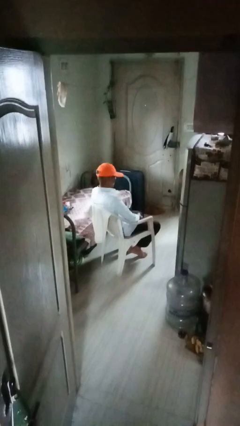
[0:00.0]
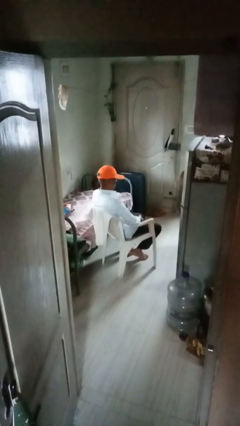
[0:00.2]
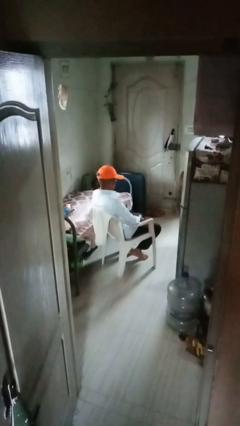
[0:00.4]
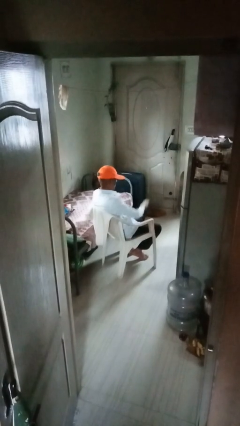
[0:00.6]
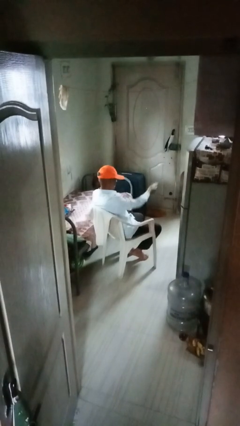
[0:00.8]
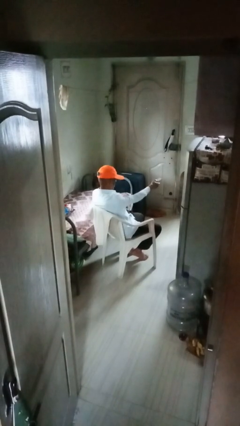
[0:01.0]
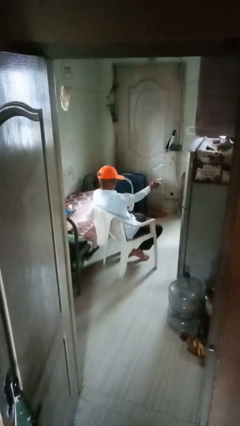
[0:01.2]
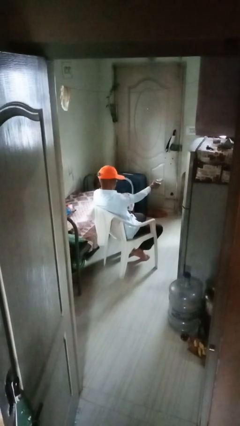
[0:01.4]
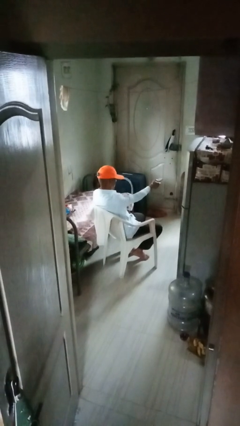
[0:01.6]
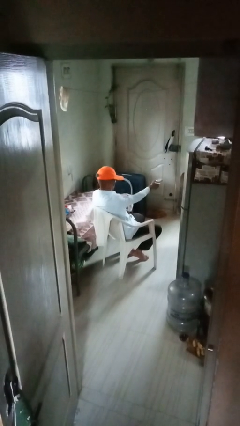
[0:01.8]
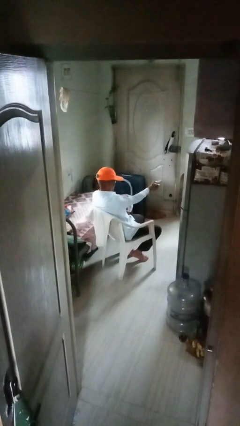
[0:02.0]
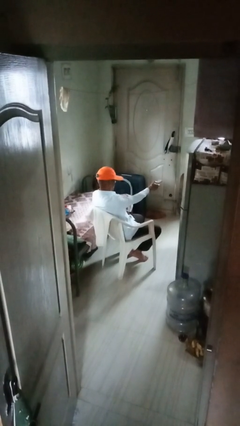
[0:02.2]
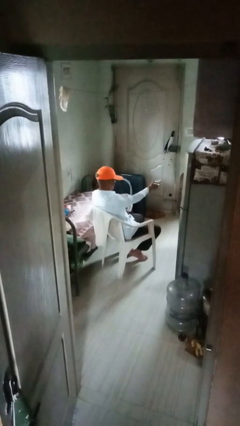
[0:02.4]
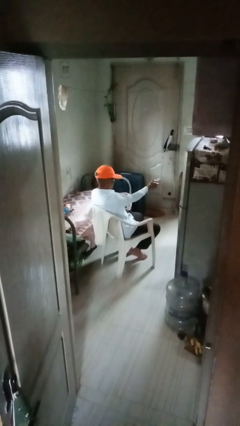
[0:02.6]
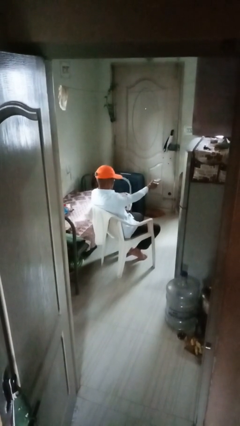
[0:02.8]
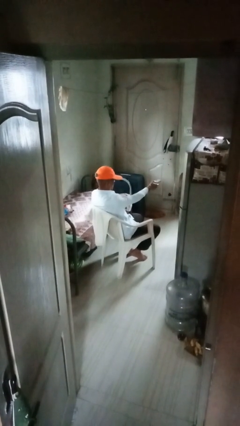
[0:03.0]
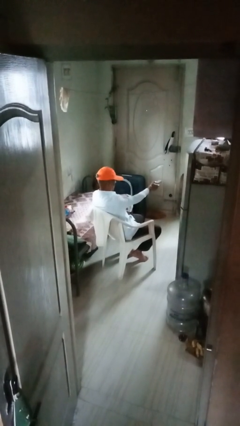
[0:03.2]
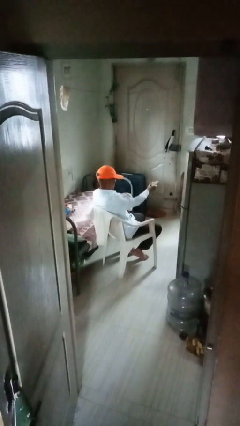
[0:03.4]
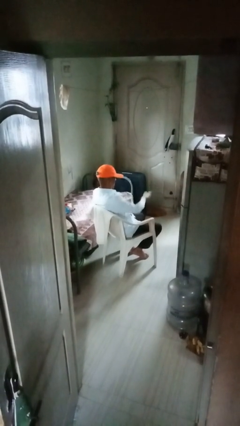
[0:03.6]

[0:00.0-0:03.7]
person uses television remote

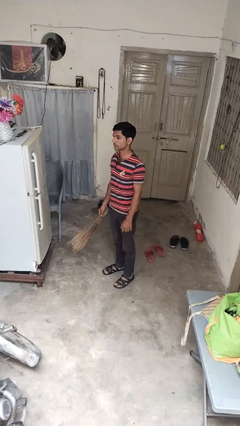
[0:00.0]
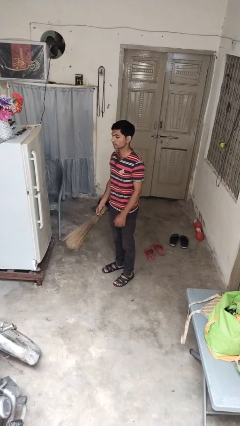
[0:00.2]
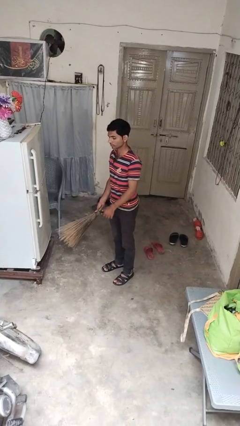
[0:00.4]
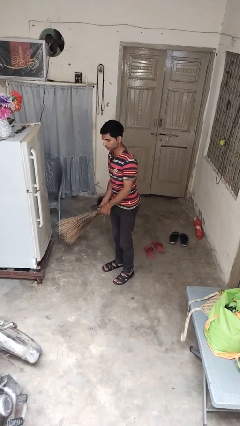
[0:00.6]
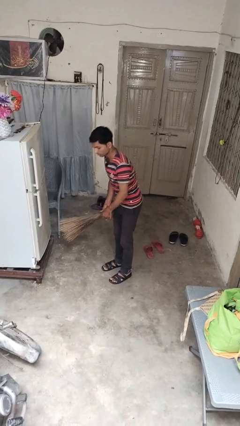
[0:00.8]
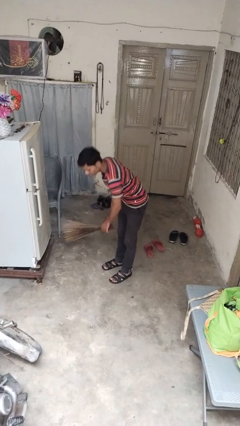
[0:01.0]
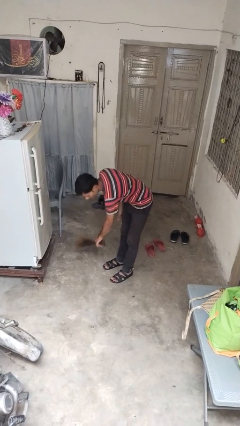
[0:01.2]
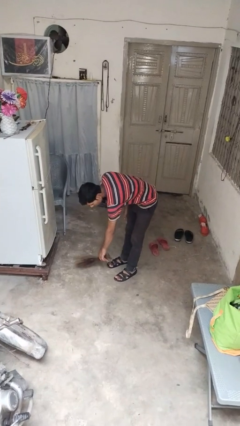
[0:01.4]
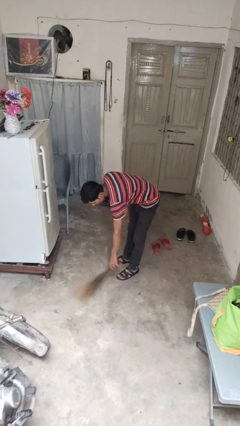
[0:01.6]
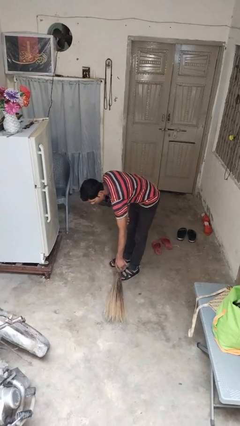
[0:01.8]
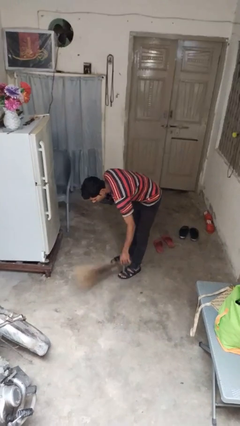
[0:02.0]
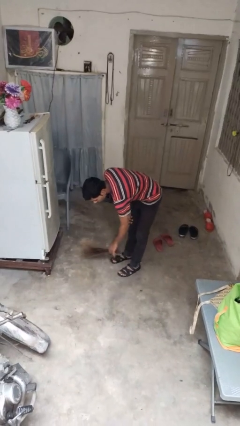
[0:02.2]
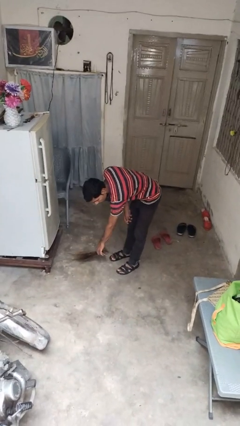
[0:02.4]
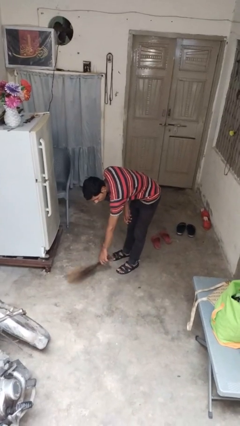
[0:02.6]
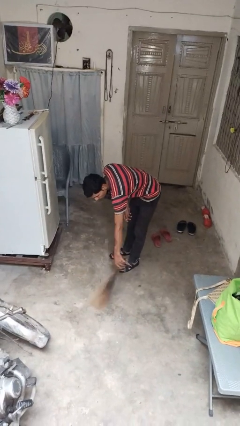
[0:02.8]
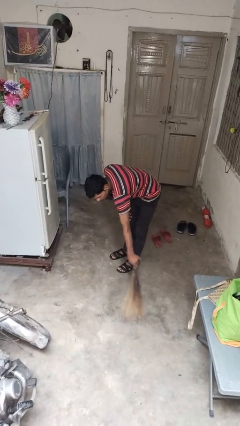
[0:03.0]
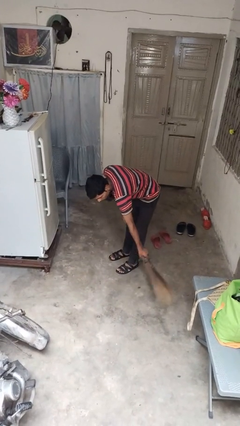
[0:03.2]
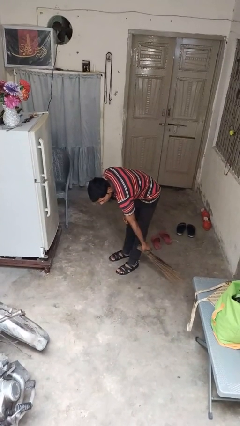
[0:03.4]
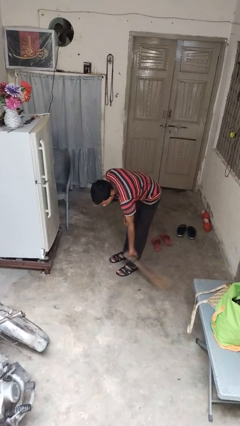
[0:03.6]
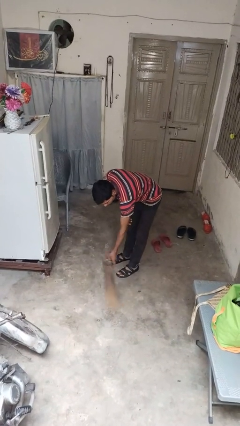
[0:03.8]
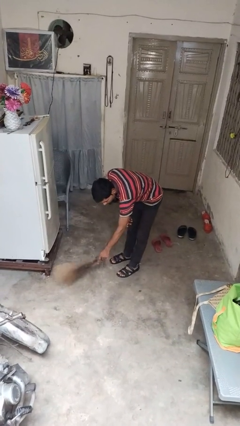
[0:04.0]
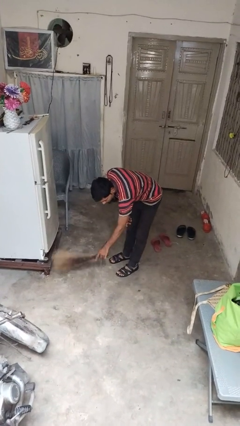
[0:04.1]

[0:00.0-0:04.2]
person sweeps floor

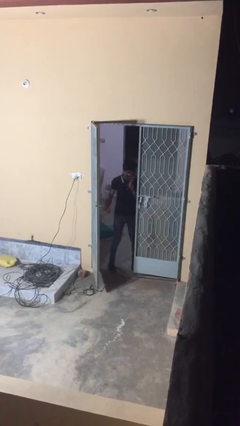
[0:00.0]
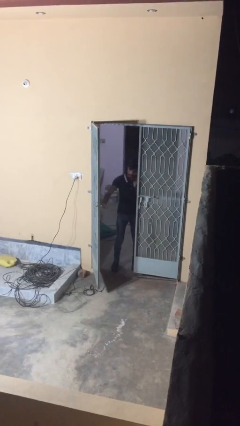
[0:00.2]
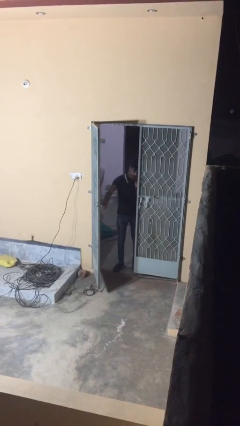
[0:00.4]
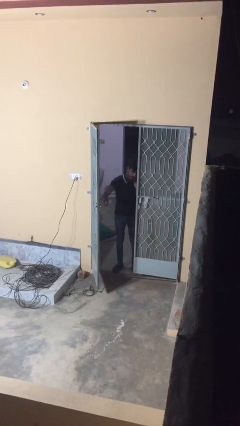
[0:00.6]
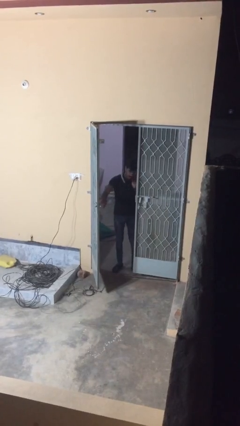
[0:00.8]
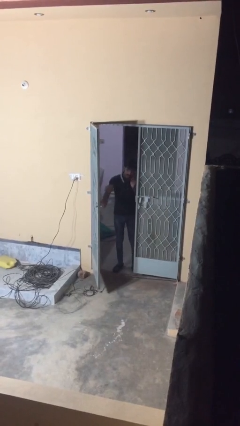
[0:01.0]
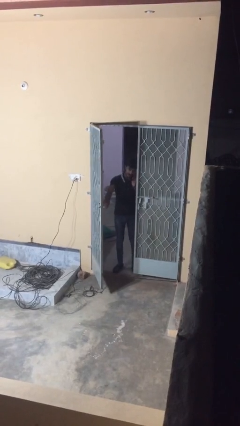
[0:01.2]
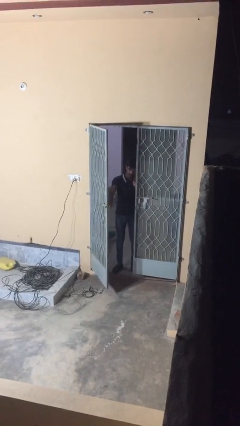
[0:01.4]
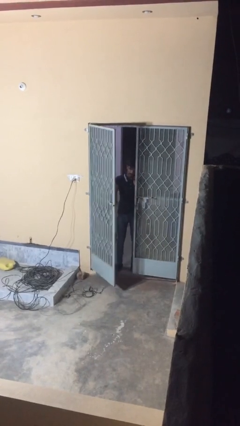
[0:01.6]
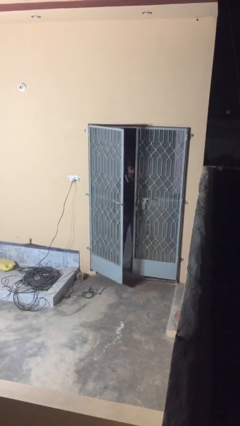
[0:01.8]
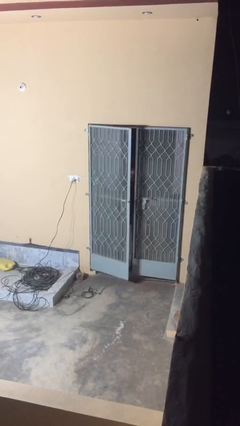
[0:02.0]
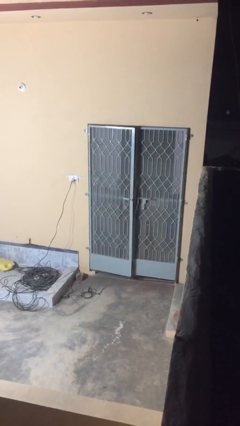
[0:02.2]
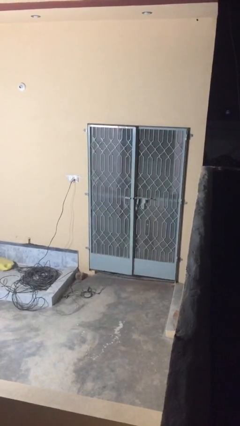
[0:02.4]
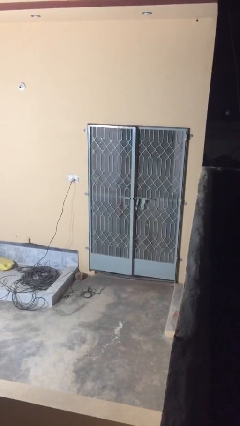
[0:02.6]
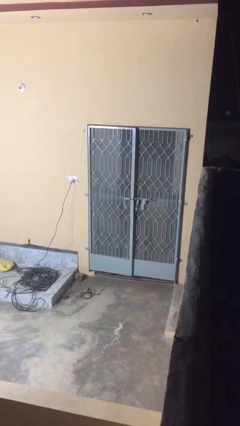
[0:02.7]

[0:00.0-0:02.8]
person closes facility door

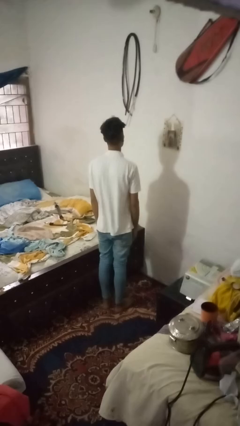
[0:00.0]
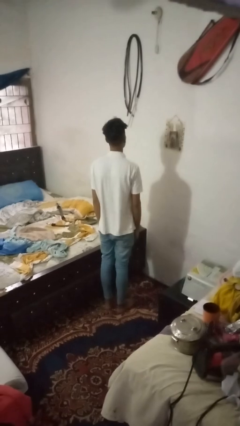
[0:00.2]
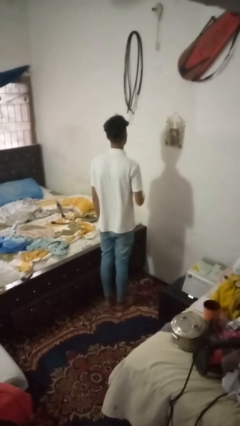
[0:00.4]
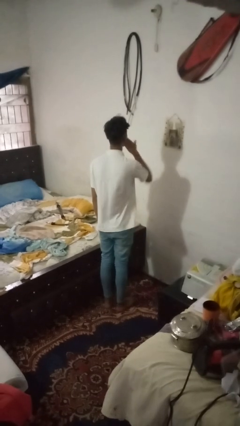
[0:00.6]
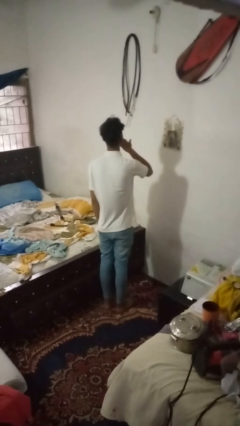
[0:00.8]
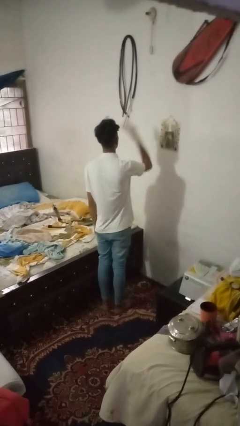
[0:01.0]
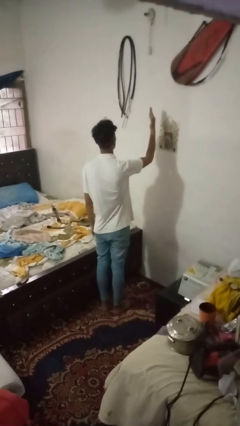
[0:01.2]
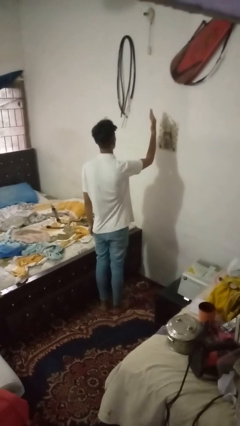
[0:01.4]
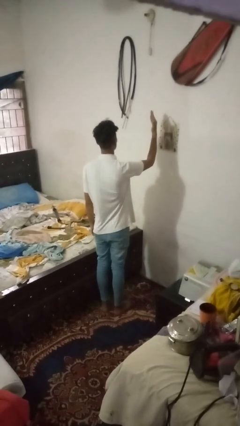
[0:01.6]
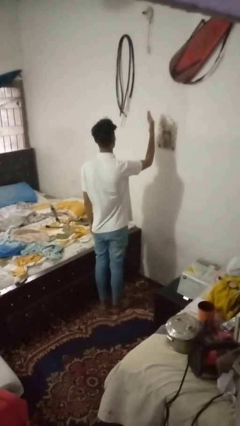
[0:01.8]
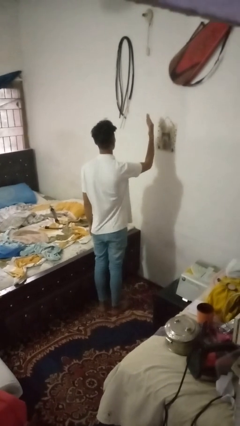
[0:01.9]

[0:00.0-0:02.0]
person gestures blow kiss

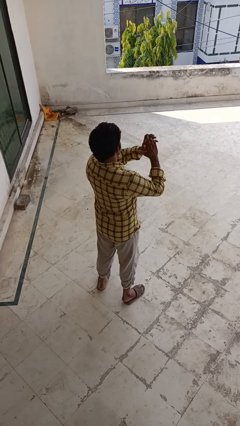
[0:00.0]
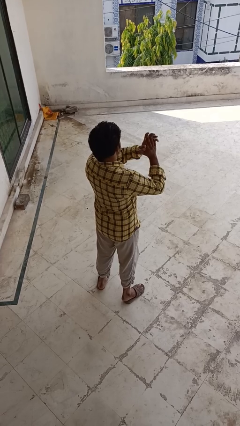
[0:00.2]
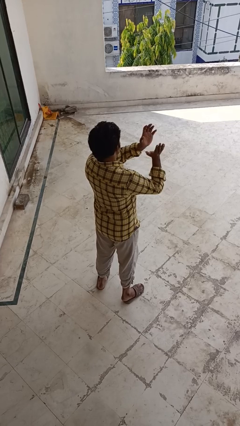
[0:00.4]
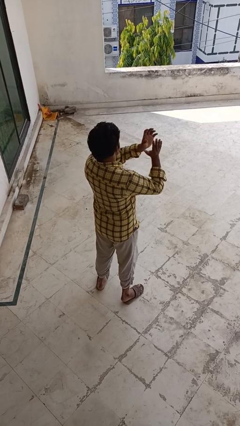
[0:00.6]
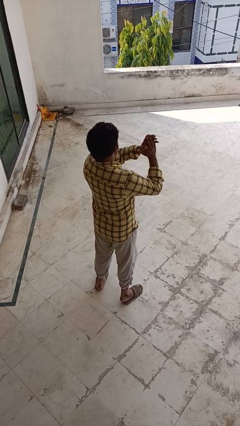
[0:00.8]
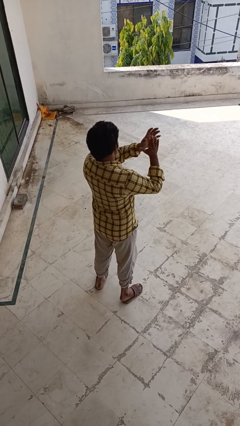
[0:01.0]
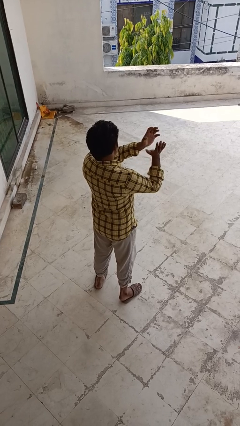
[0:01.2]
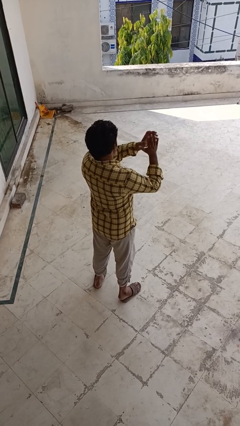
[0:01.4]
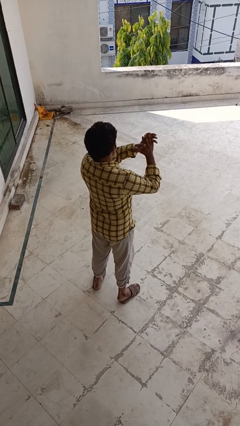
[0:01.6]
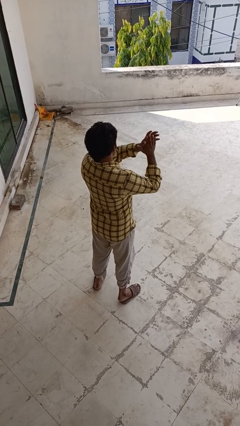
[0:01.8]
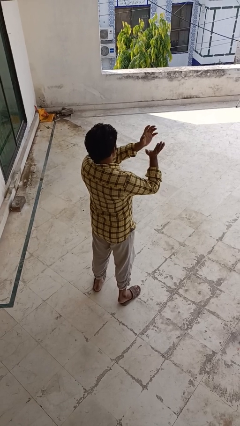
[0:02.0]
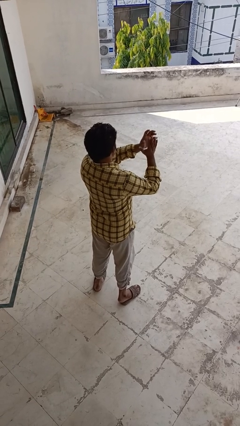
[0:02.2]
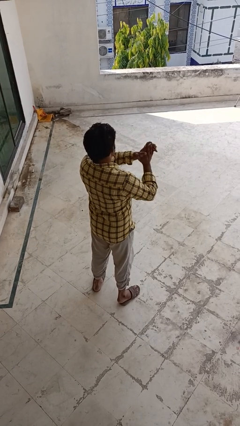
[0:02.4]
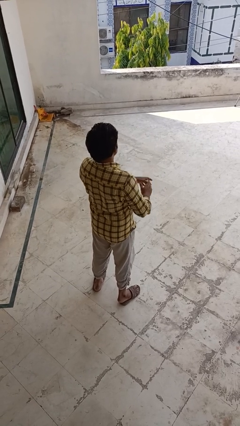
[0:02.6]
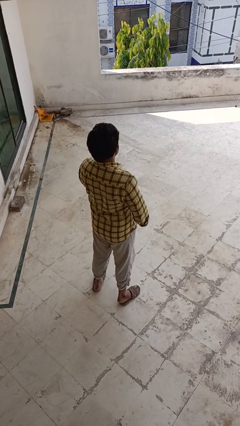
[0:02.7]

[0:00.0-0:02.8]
person claps hands

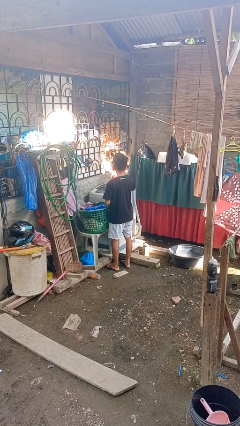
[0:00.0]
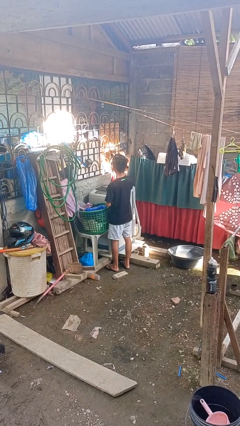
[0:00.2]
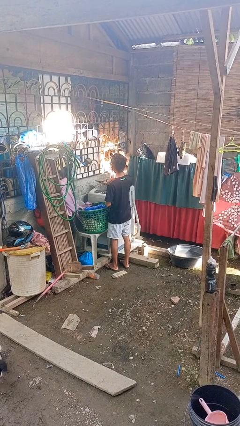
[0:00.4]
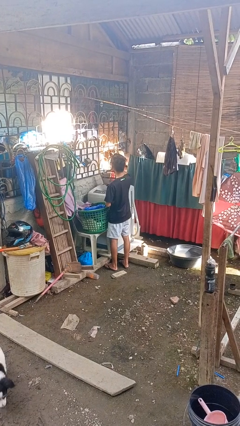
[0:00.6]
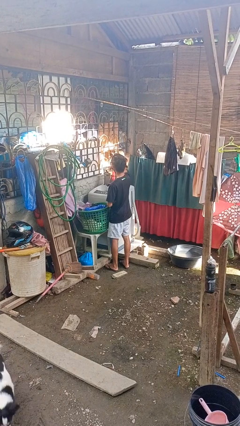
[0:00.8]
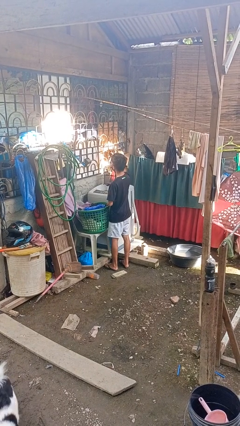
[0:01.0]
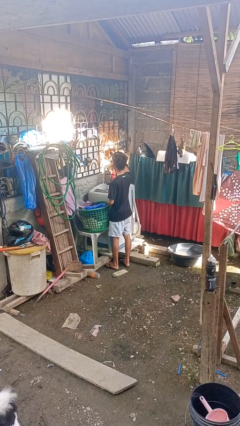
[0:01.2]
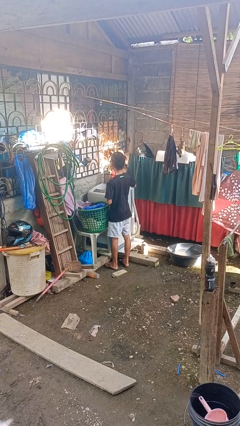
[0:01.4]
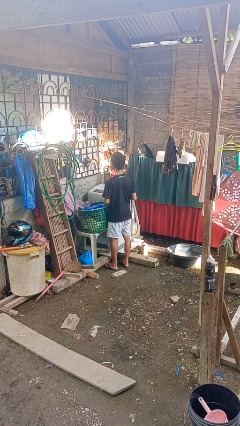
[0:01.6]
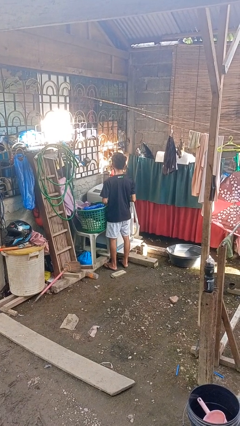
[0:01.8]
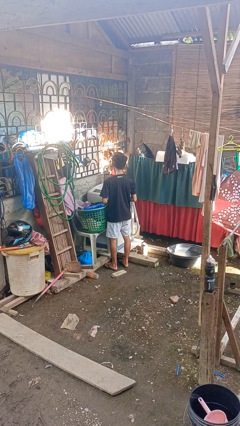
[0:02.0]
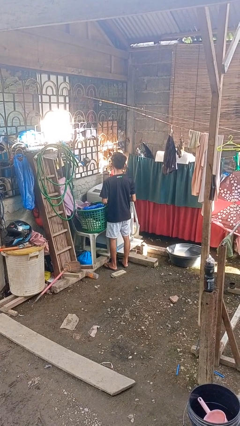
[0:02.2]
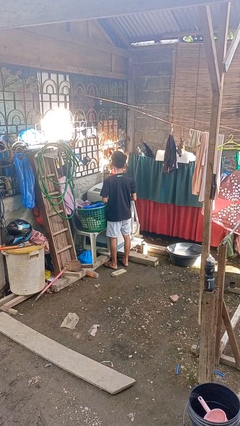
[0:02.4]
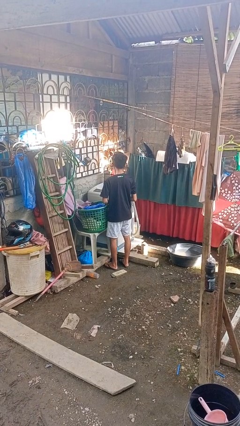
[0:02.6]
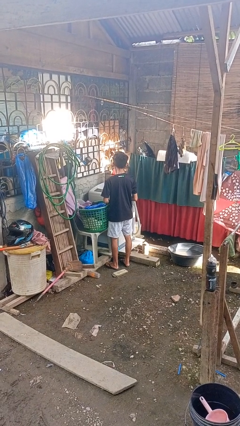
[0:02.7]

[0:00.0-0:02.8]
person opens clothes washer
